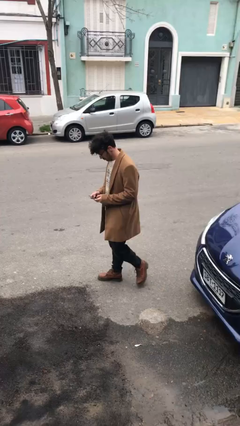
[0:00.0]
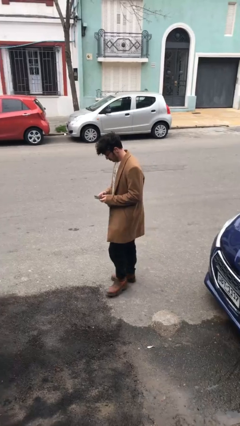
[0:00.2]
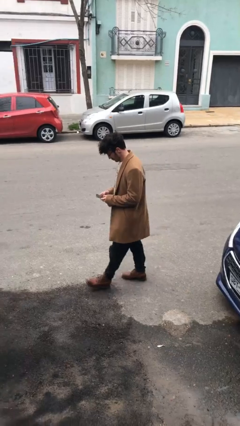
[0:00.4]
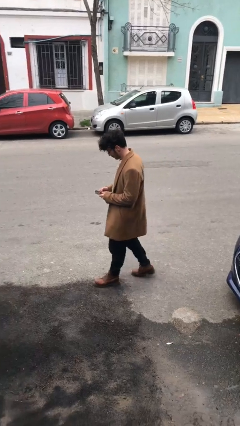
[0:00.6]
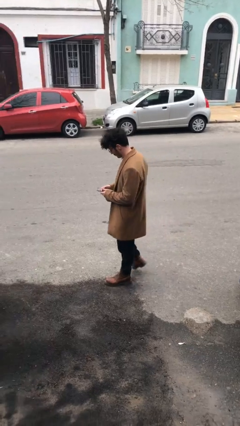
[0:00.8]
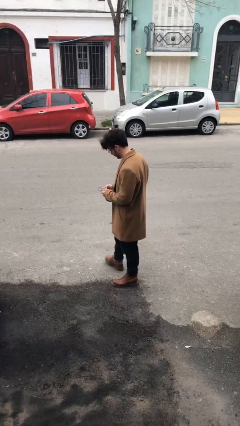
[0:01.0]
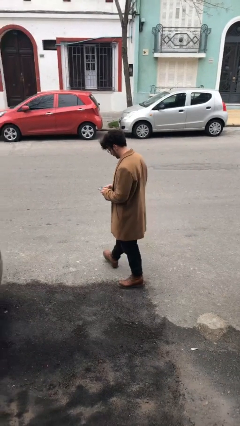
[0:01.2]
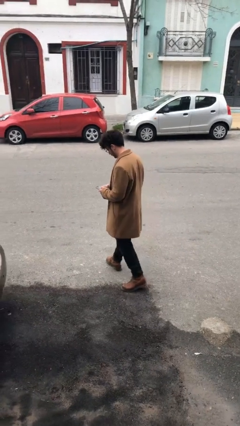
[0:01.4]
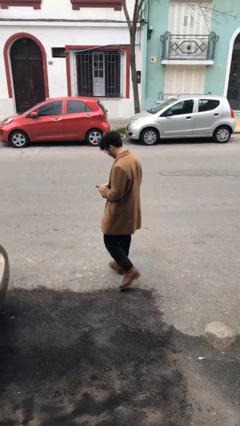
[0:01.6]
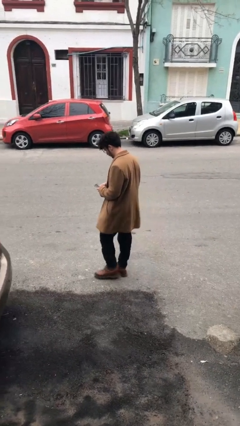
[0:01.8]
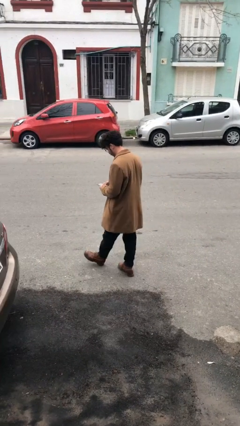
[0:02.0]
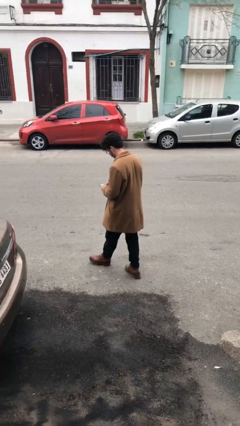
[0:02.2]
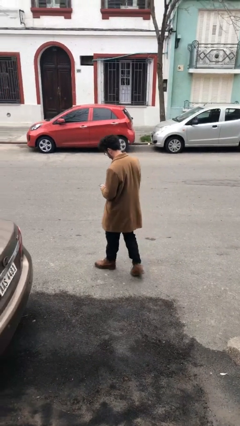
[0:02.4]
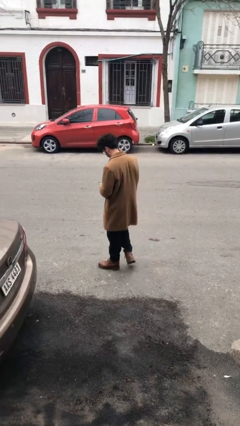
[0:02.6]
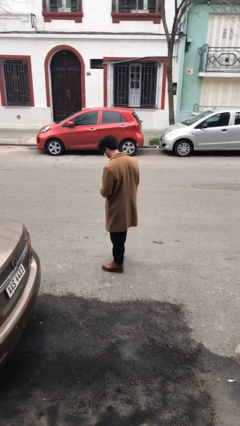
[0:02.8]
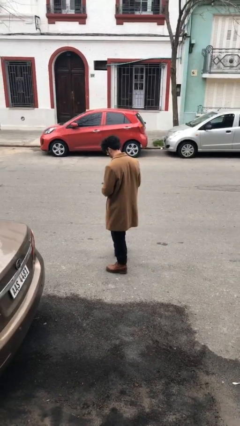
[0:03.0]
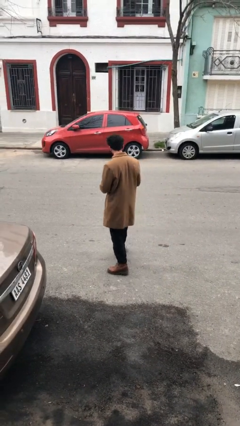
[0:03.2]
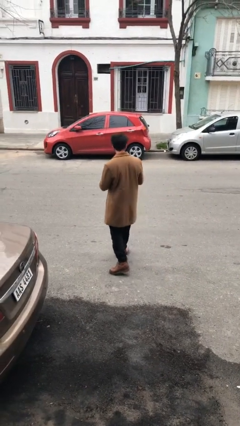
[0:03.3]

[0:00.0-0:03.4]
person texts on phone

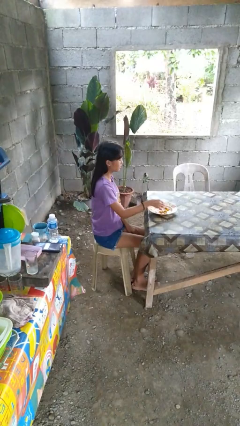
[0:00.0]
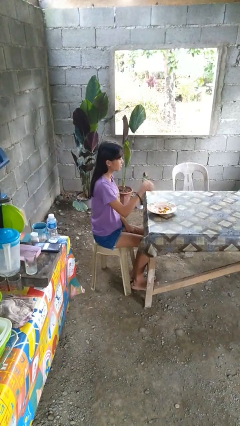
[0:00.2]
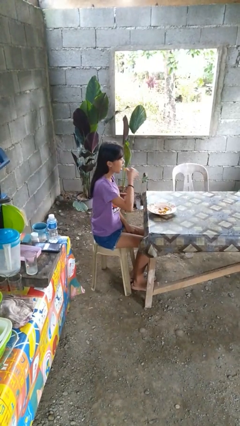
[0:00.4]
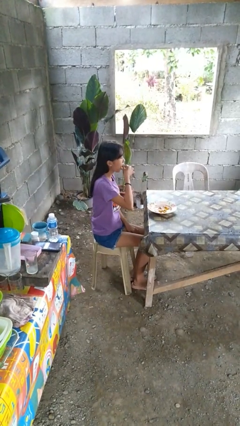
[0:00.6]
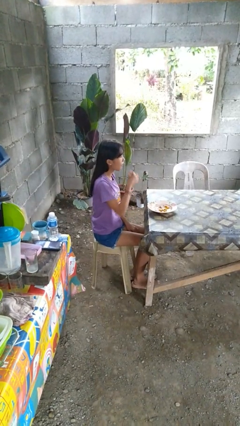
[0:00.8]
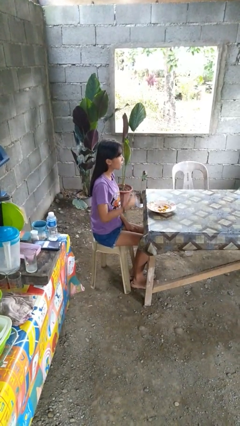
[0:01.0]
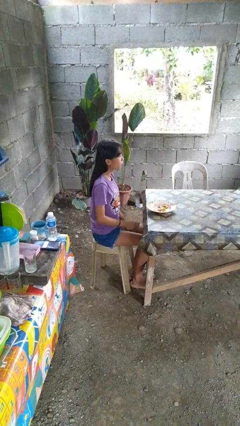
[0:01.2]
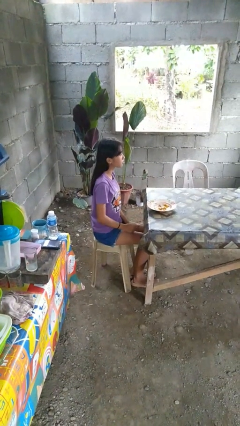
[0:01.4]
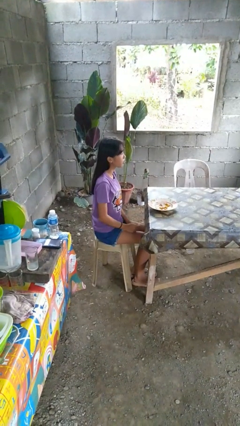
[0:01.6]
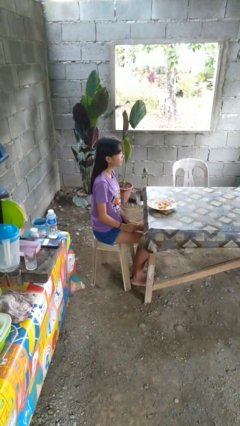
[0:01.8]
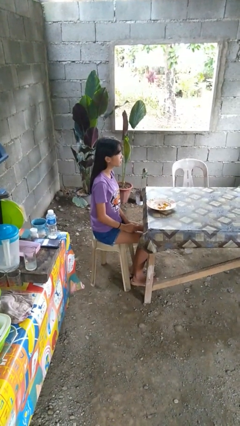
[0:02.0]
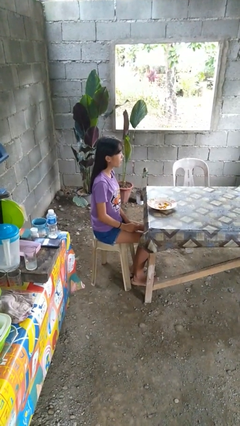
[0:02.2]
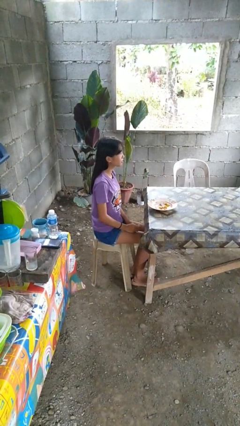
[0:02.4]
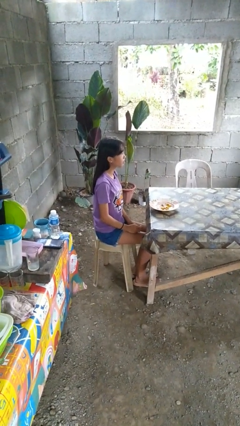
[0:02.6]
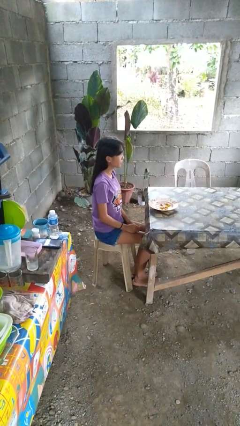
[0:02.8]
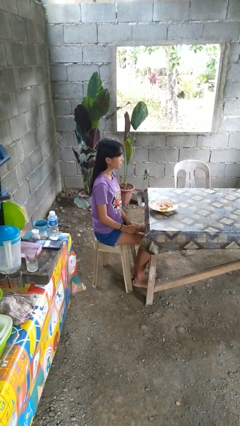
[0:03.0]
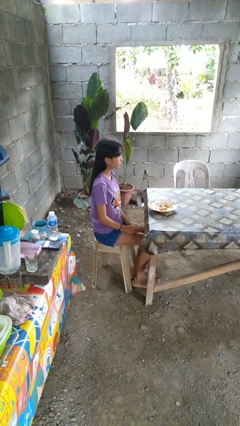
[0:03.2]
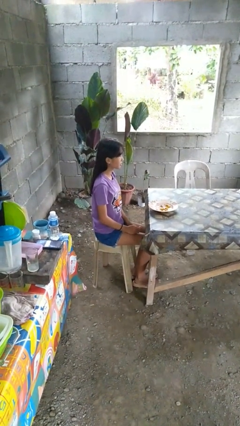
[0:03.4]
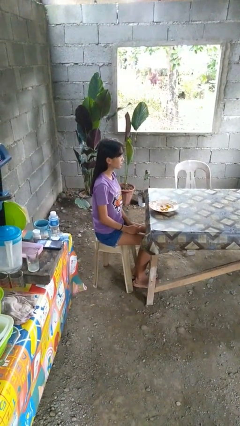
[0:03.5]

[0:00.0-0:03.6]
person eats with hands

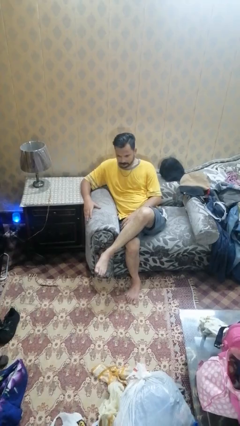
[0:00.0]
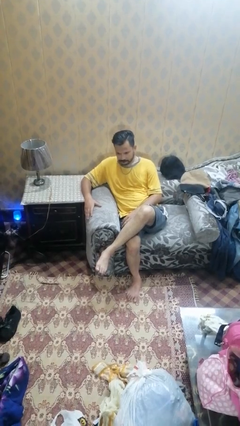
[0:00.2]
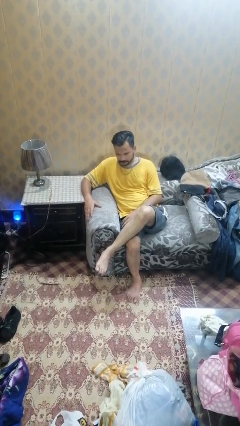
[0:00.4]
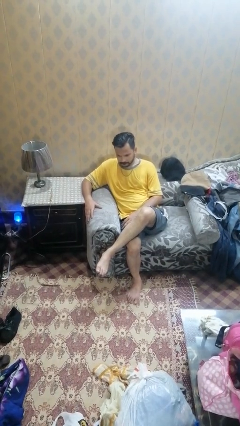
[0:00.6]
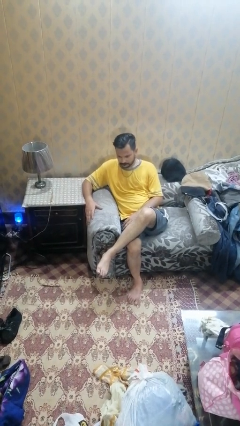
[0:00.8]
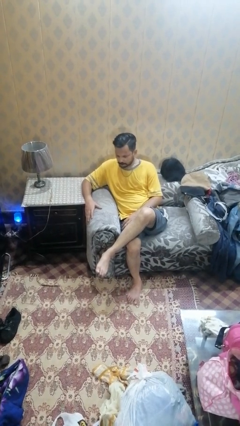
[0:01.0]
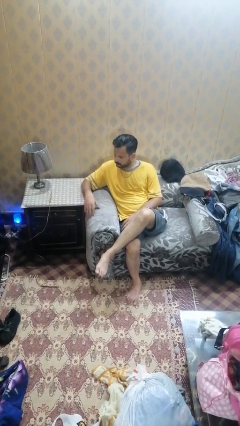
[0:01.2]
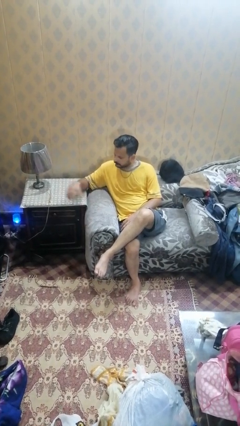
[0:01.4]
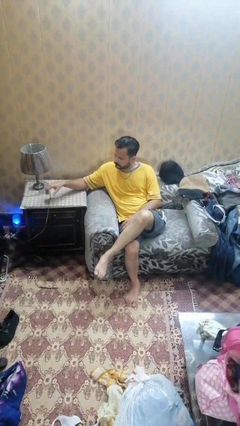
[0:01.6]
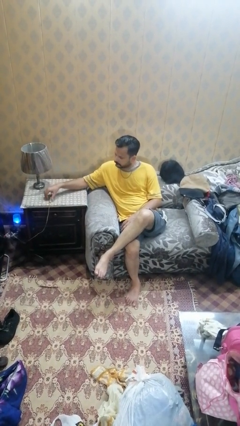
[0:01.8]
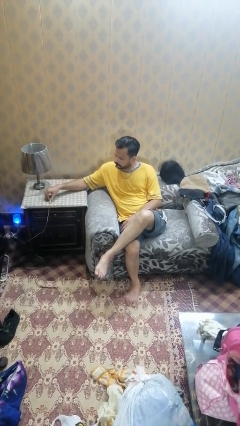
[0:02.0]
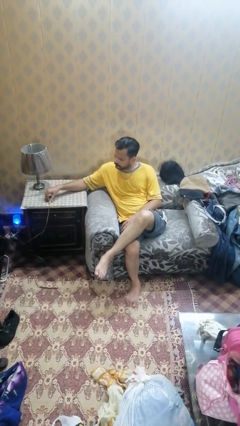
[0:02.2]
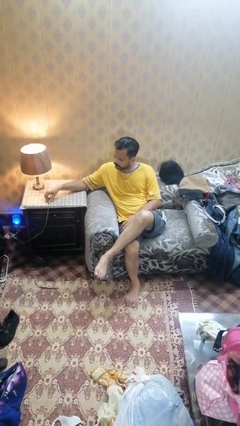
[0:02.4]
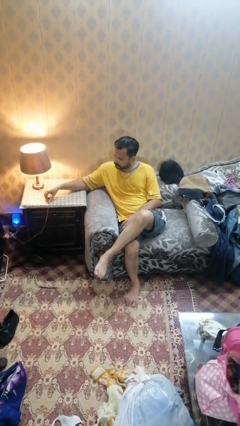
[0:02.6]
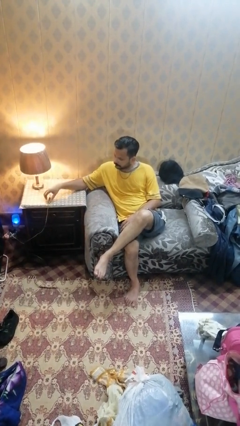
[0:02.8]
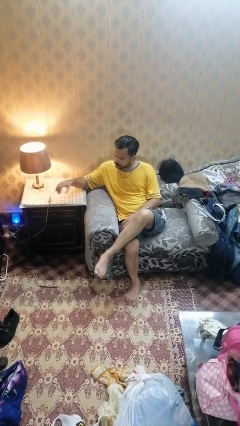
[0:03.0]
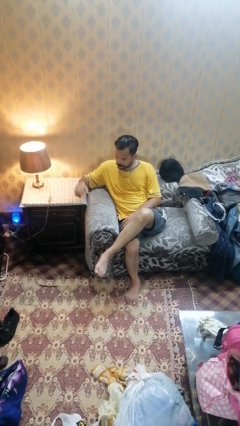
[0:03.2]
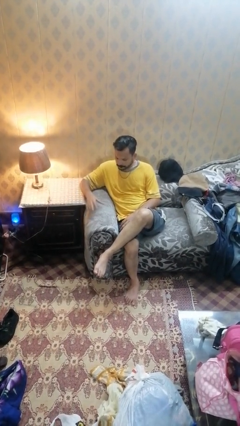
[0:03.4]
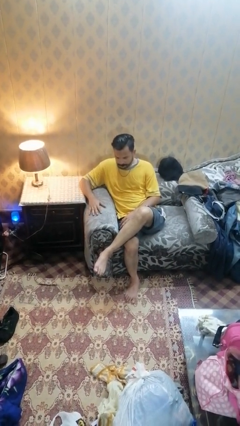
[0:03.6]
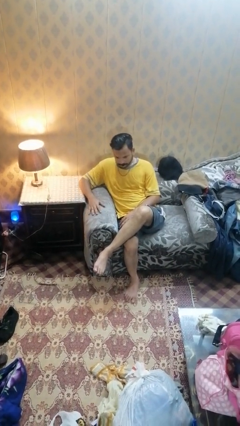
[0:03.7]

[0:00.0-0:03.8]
person turns on lamp

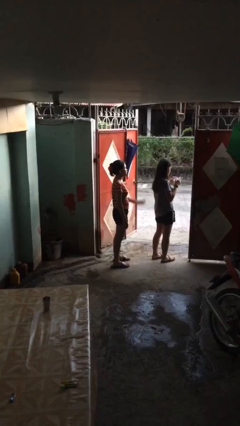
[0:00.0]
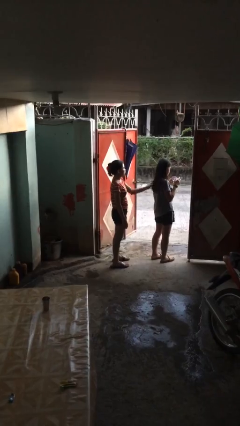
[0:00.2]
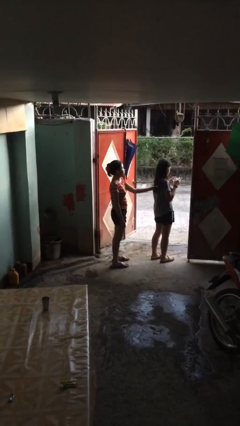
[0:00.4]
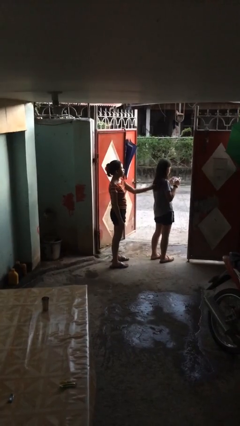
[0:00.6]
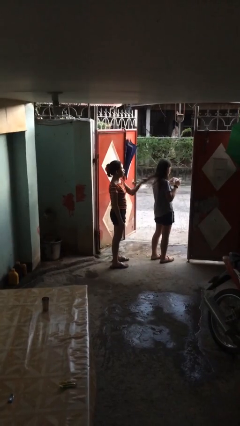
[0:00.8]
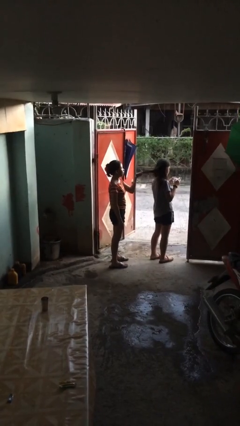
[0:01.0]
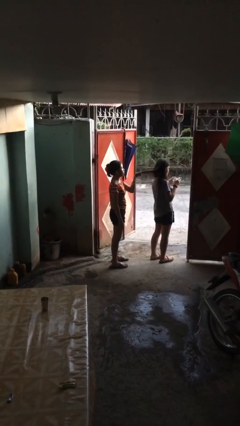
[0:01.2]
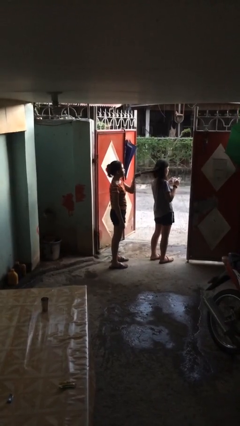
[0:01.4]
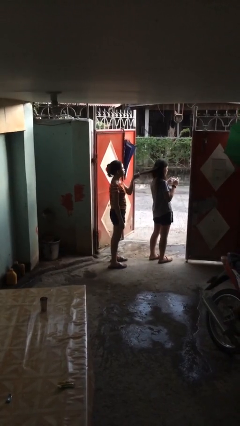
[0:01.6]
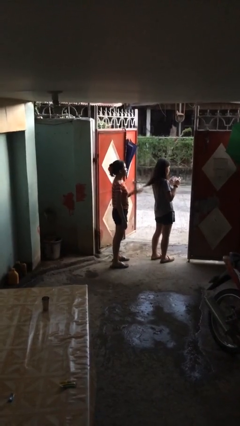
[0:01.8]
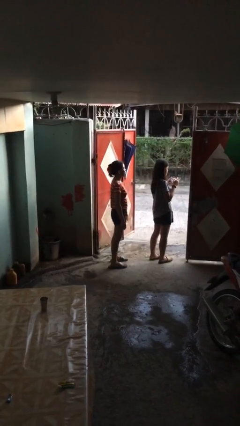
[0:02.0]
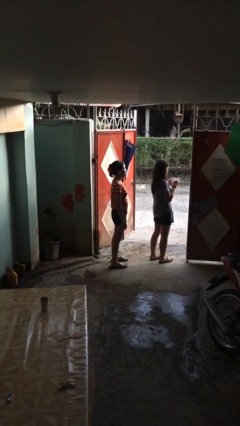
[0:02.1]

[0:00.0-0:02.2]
person grabs person by hair

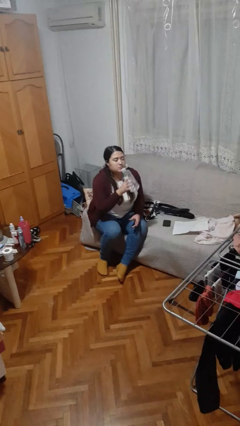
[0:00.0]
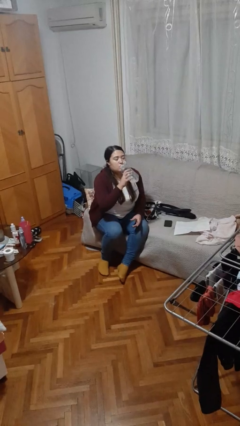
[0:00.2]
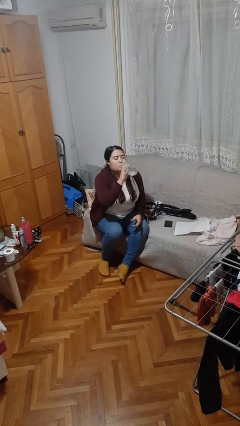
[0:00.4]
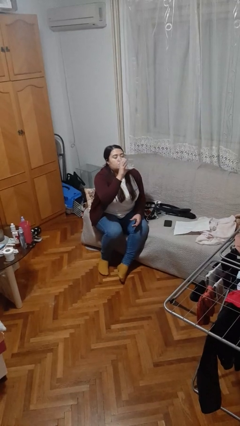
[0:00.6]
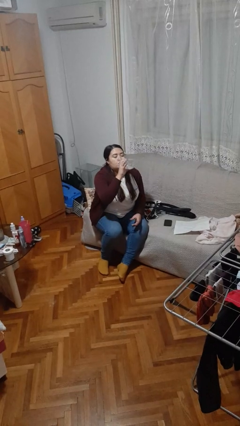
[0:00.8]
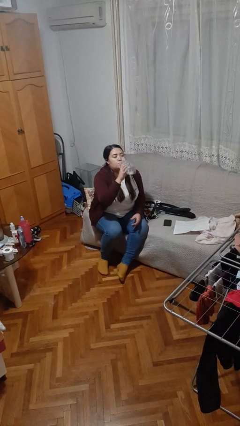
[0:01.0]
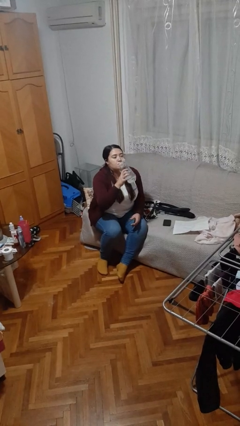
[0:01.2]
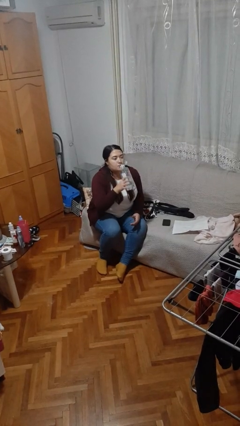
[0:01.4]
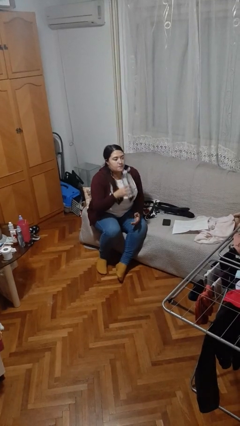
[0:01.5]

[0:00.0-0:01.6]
person drinks from bottle

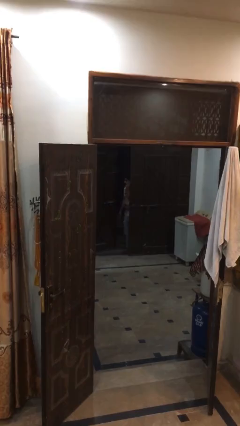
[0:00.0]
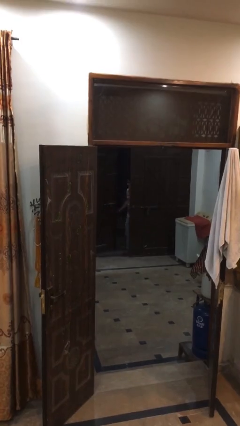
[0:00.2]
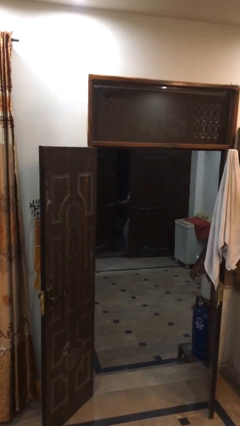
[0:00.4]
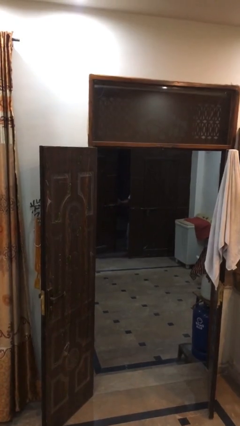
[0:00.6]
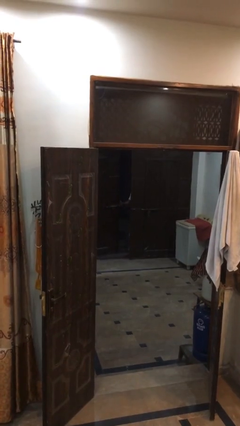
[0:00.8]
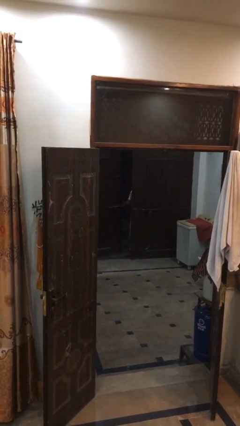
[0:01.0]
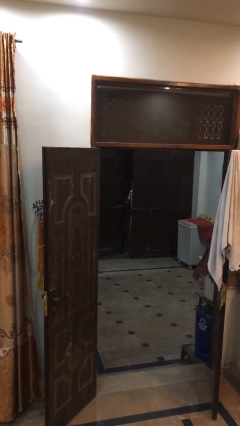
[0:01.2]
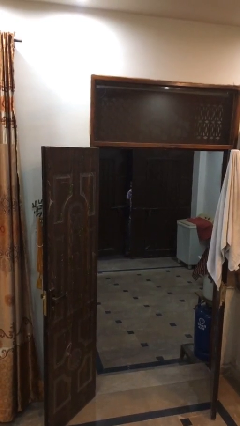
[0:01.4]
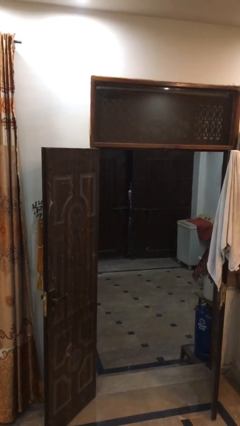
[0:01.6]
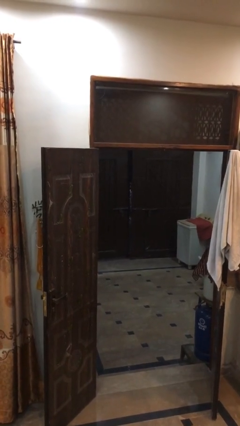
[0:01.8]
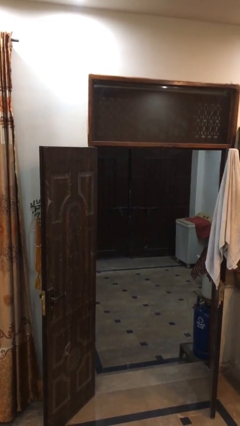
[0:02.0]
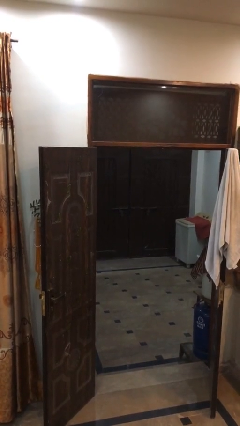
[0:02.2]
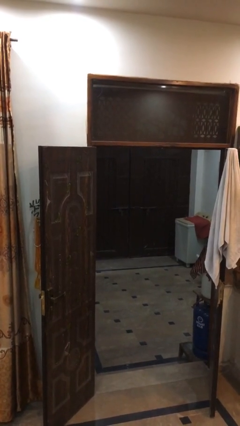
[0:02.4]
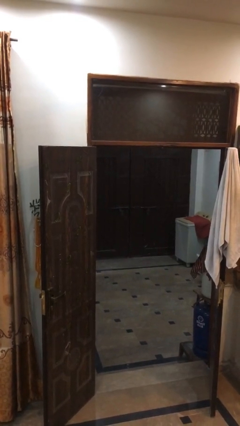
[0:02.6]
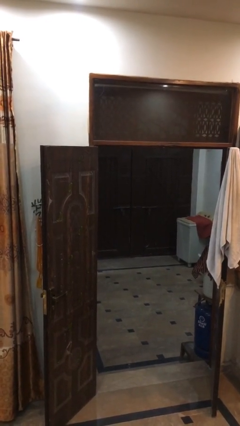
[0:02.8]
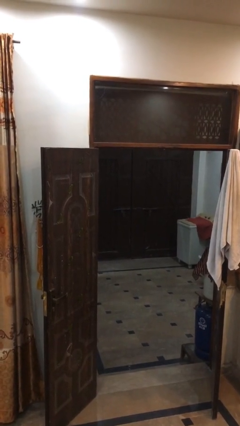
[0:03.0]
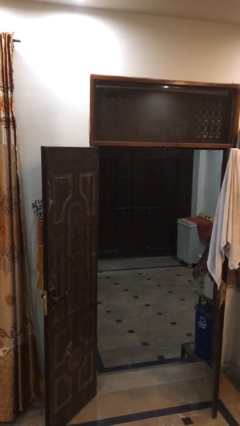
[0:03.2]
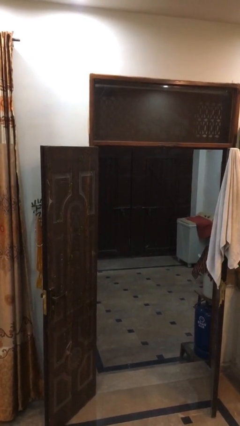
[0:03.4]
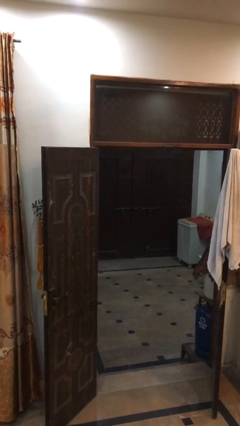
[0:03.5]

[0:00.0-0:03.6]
person closes facility door
